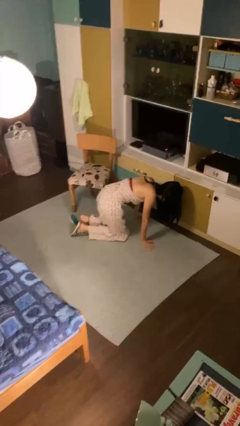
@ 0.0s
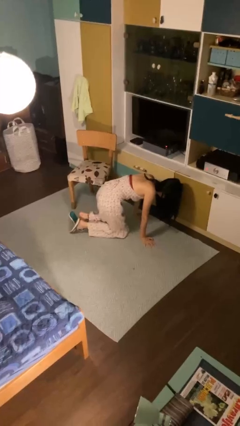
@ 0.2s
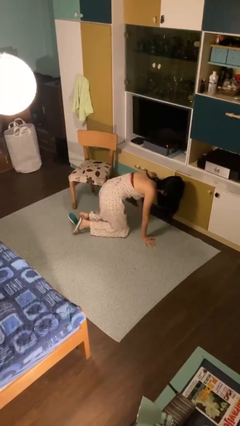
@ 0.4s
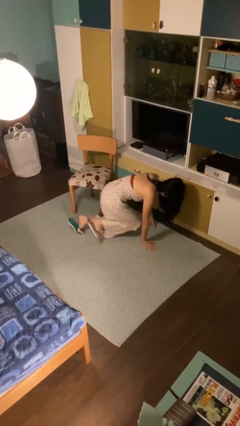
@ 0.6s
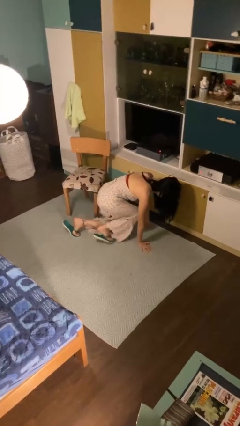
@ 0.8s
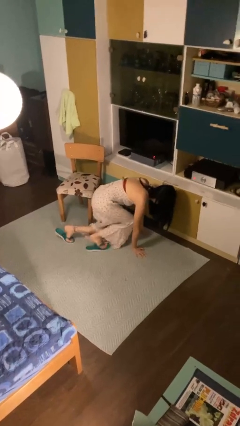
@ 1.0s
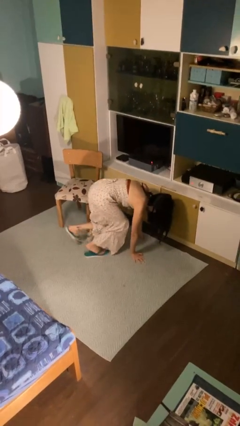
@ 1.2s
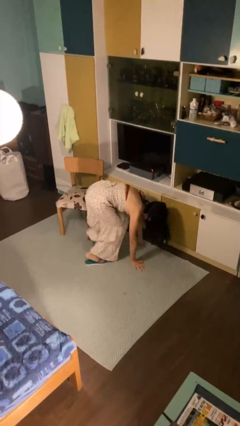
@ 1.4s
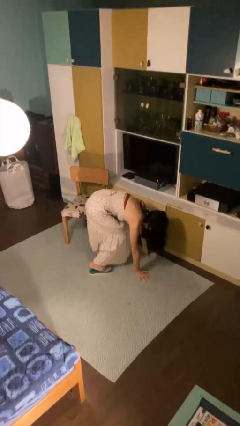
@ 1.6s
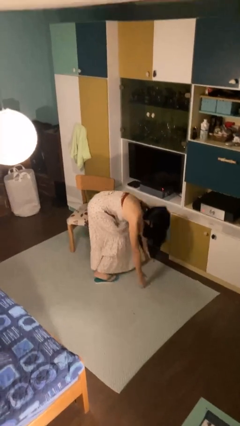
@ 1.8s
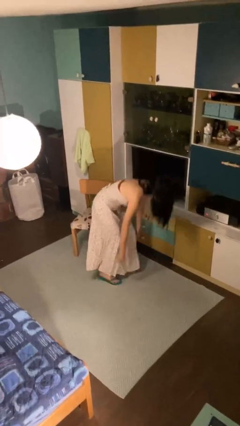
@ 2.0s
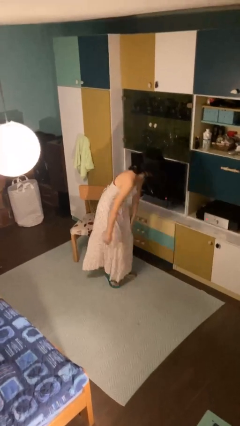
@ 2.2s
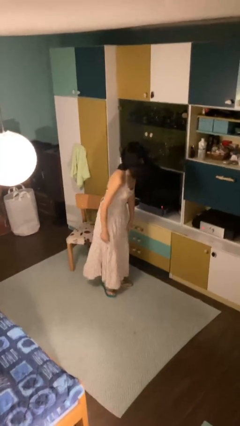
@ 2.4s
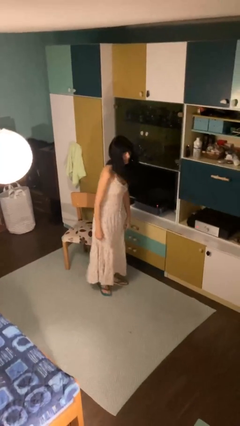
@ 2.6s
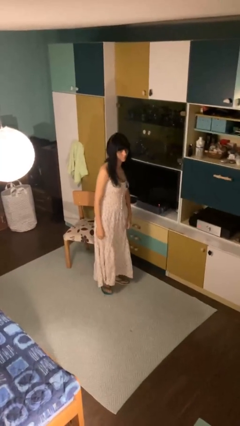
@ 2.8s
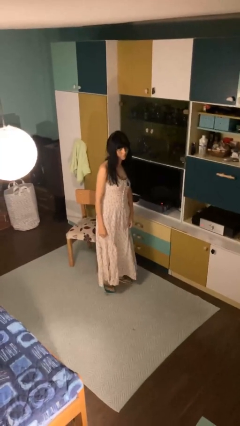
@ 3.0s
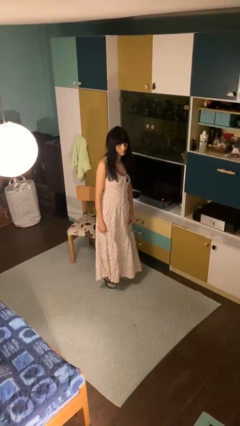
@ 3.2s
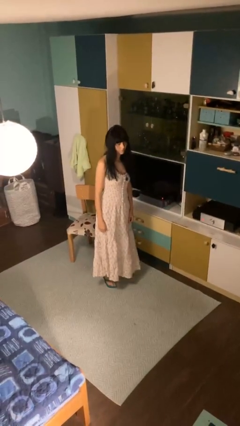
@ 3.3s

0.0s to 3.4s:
person stands up from floor

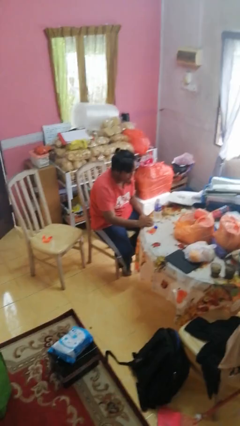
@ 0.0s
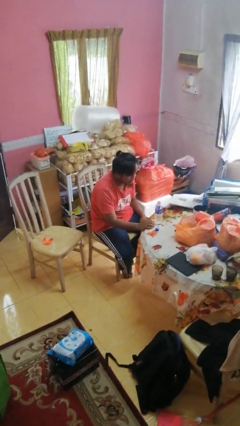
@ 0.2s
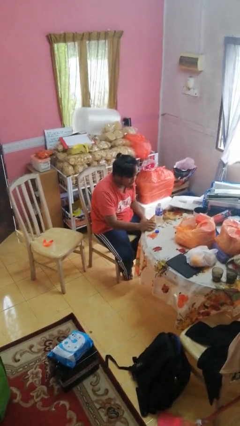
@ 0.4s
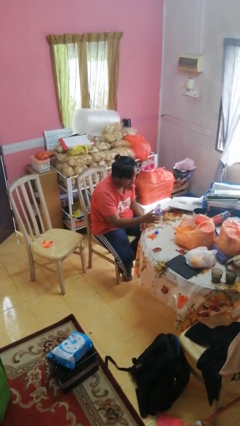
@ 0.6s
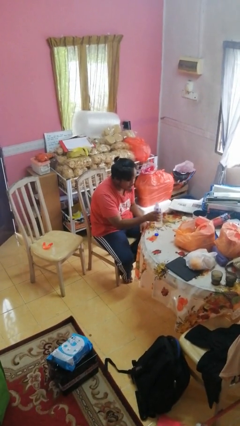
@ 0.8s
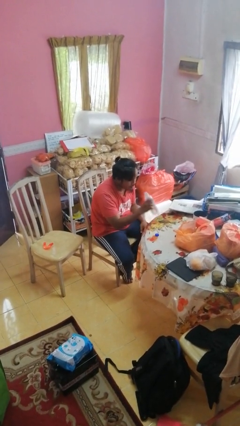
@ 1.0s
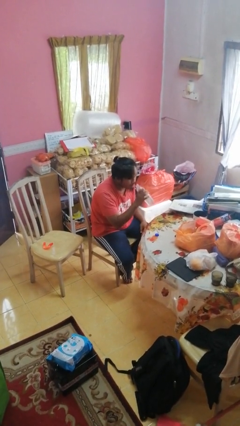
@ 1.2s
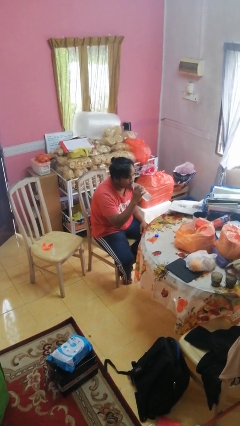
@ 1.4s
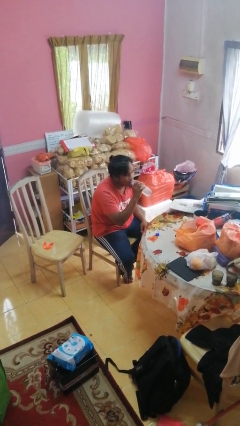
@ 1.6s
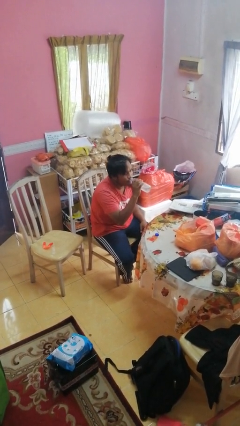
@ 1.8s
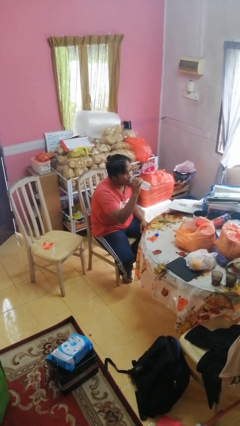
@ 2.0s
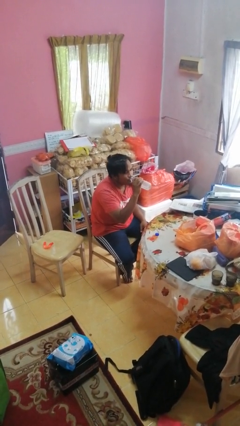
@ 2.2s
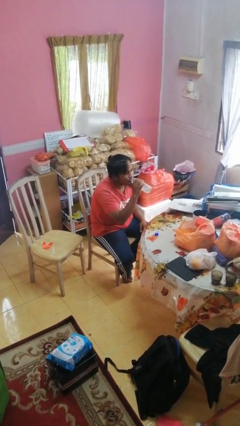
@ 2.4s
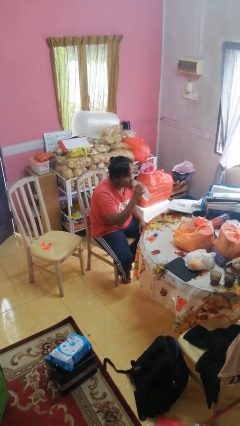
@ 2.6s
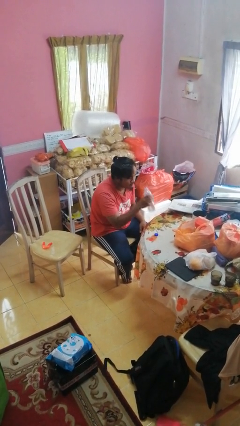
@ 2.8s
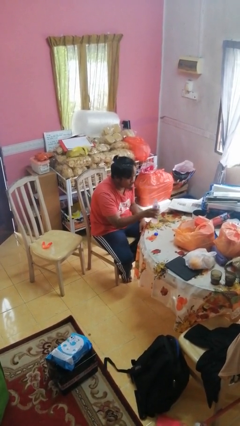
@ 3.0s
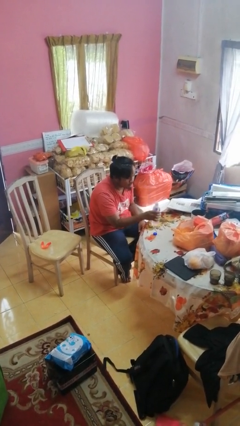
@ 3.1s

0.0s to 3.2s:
person drinks from bottle

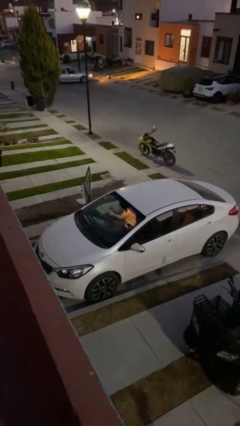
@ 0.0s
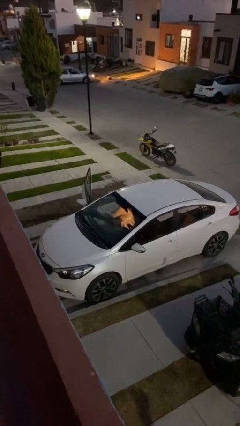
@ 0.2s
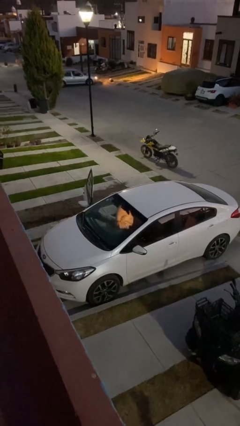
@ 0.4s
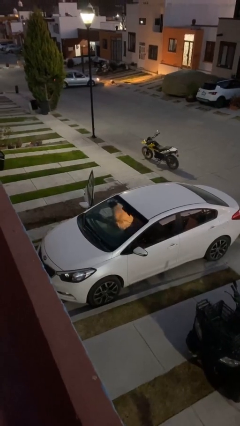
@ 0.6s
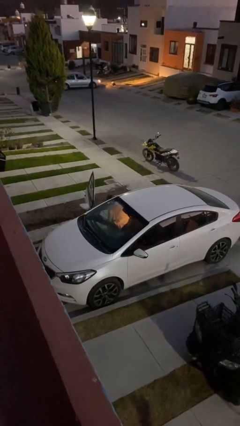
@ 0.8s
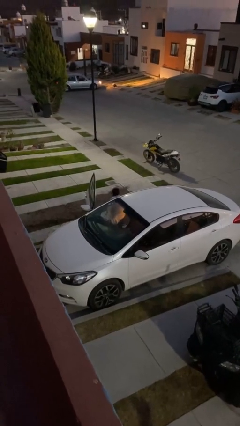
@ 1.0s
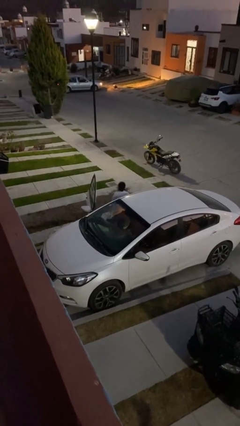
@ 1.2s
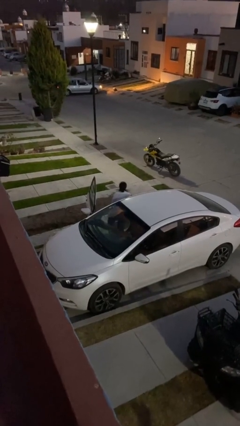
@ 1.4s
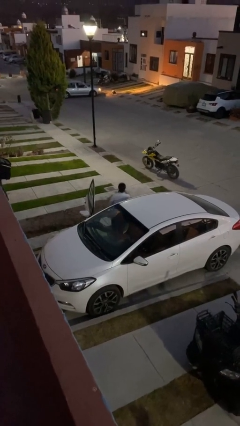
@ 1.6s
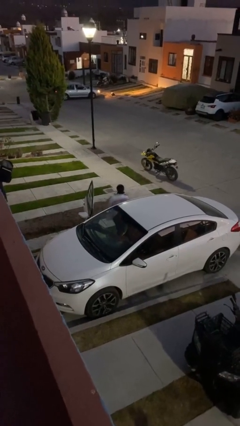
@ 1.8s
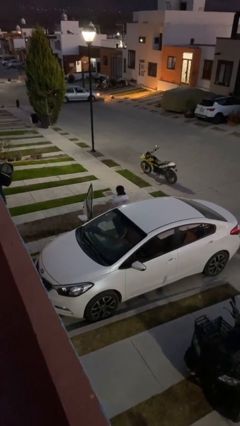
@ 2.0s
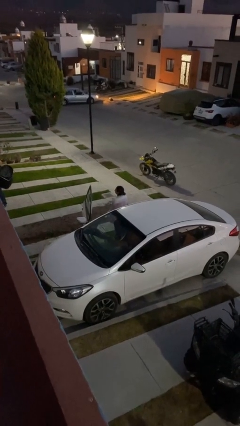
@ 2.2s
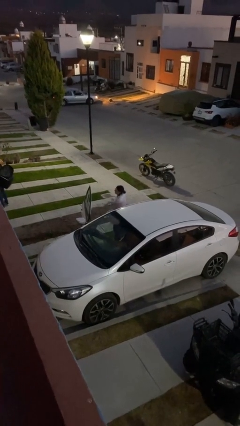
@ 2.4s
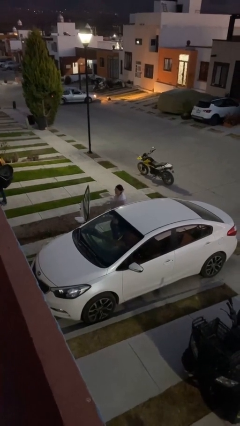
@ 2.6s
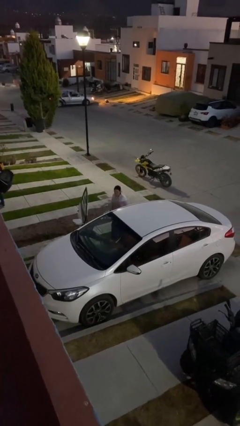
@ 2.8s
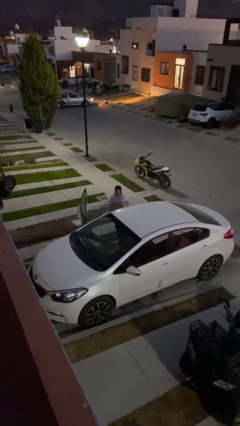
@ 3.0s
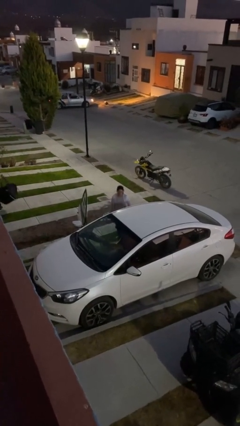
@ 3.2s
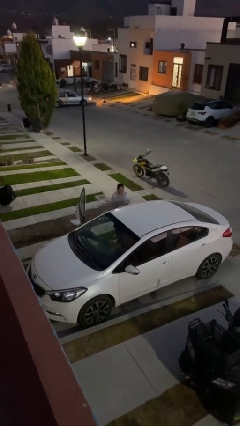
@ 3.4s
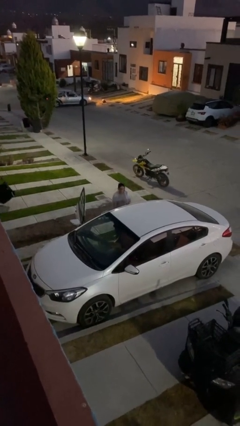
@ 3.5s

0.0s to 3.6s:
person exits car

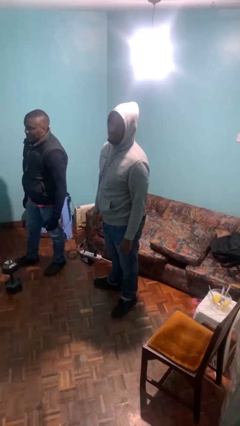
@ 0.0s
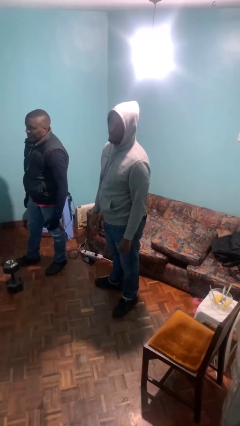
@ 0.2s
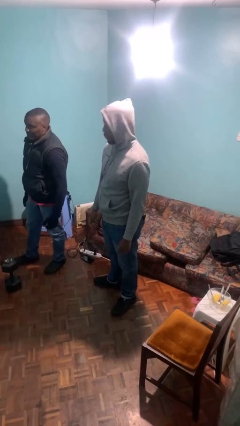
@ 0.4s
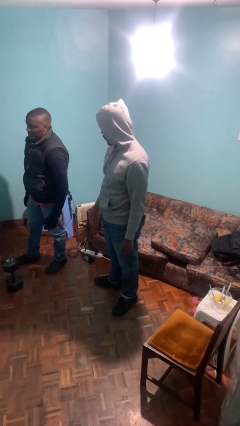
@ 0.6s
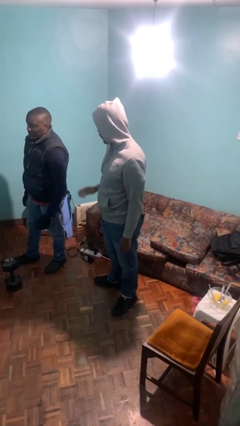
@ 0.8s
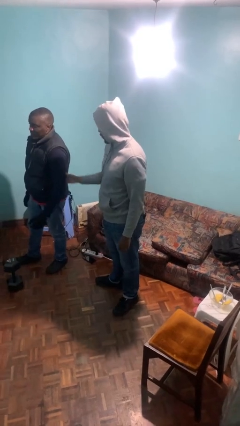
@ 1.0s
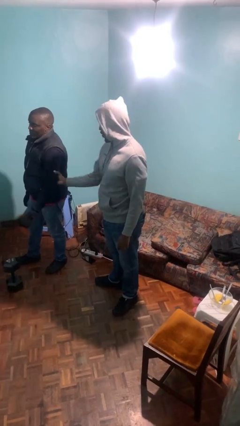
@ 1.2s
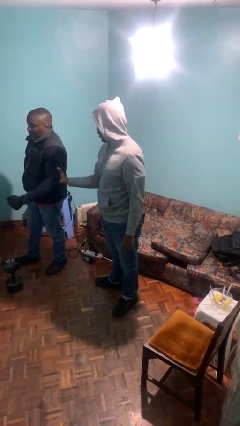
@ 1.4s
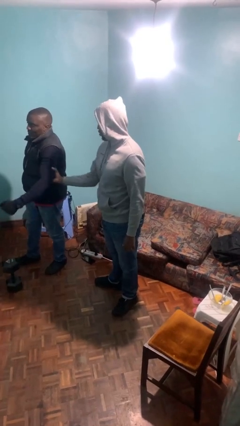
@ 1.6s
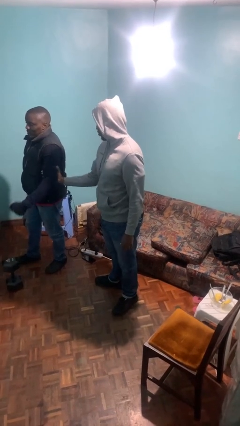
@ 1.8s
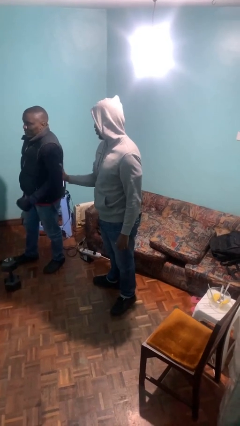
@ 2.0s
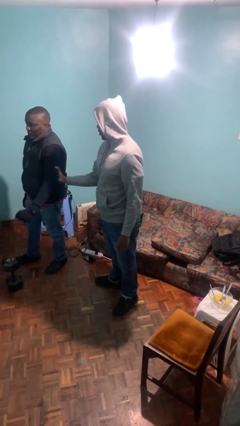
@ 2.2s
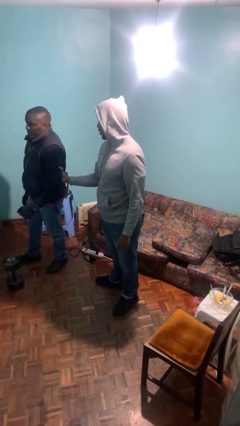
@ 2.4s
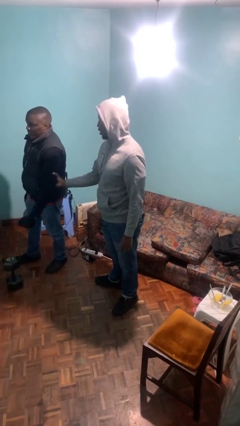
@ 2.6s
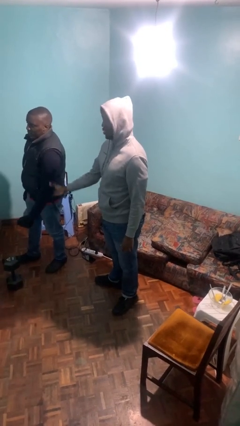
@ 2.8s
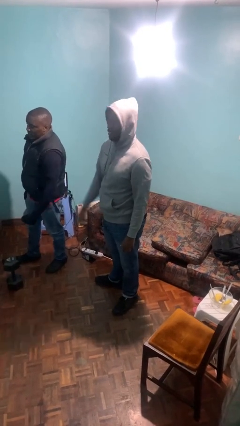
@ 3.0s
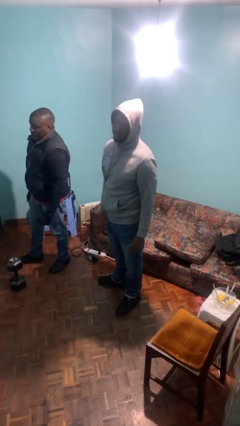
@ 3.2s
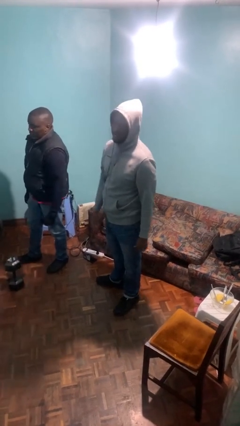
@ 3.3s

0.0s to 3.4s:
person grabs person by bicep

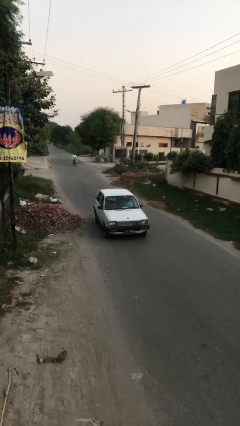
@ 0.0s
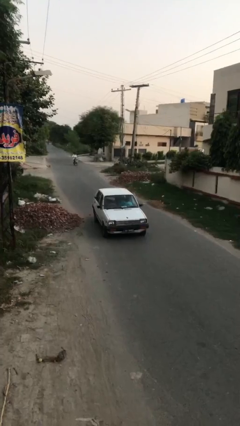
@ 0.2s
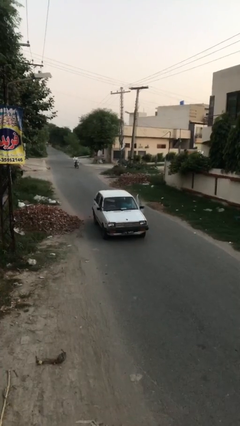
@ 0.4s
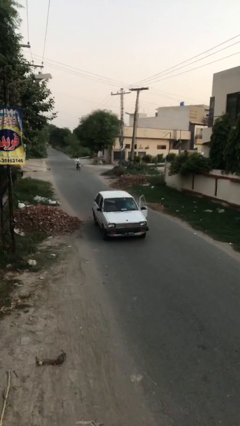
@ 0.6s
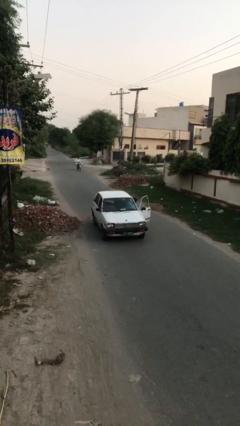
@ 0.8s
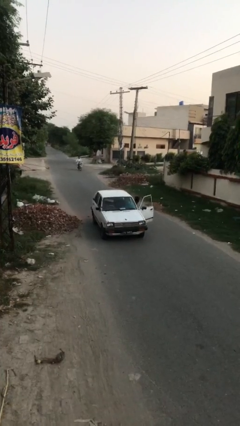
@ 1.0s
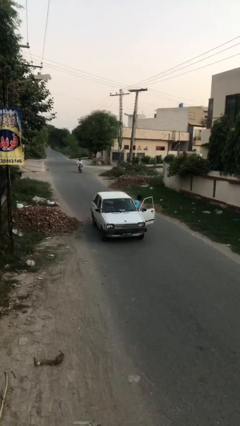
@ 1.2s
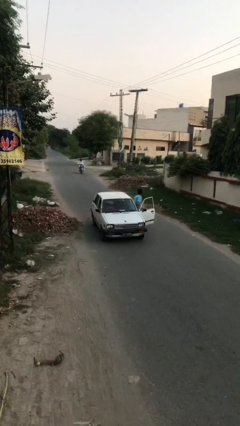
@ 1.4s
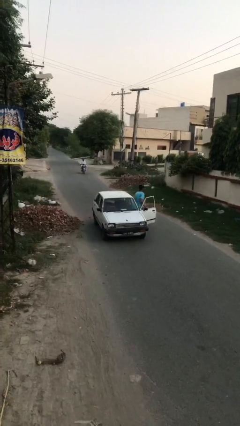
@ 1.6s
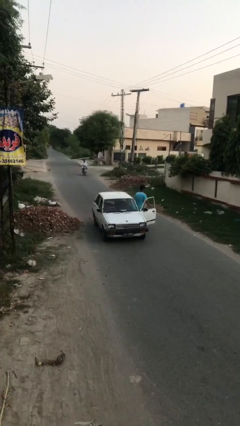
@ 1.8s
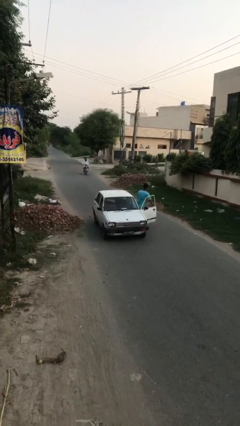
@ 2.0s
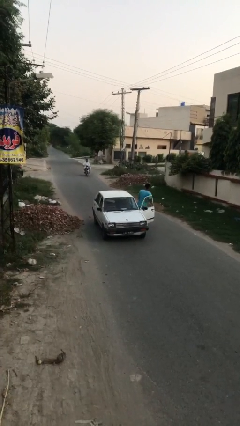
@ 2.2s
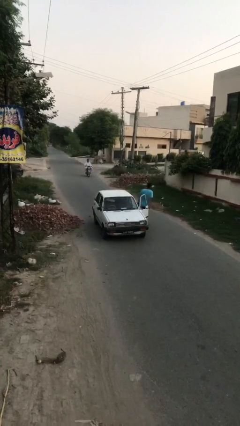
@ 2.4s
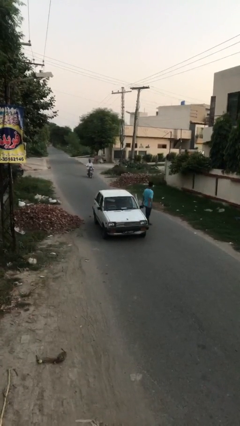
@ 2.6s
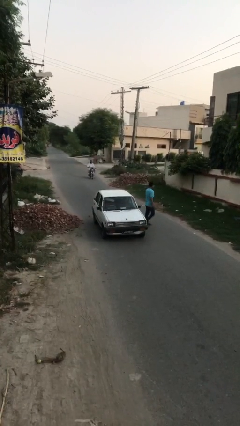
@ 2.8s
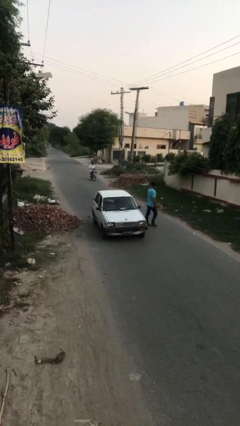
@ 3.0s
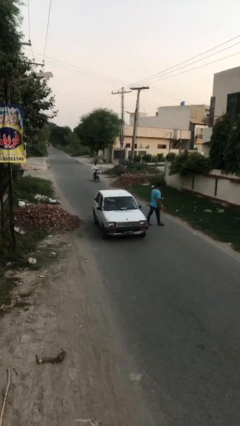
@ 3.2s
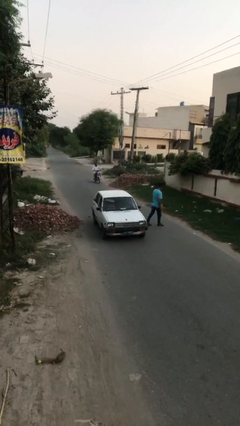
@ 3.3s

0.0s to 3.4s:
car drops off person

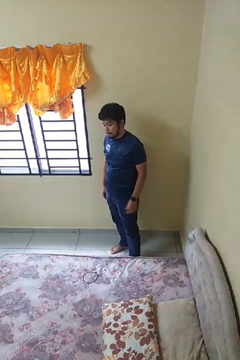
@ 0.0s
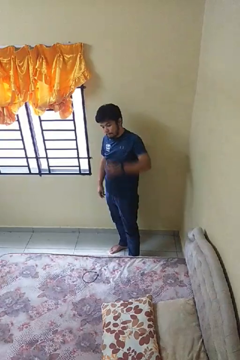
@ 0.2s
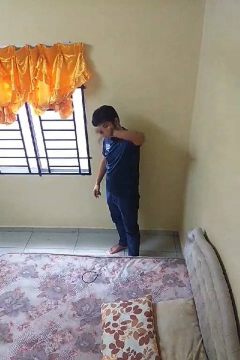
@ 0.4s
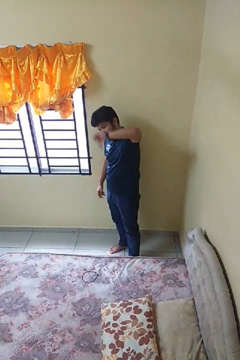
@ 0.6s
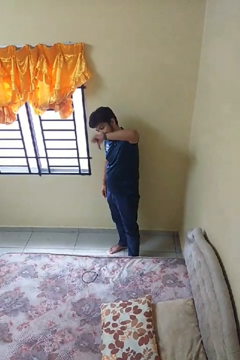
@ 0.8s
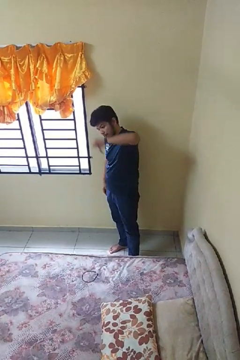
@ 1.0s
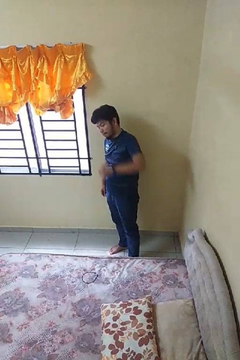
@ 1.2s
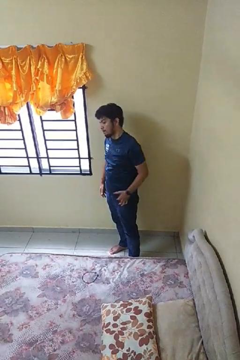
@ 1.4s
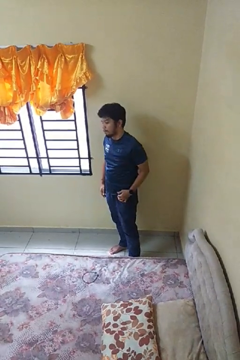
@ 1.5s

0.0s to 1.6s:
person gestures thumbs down
